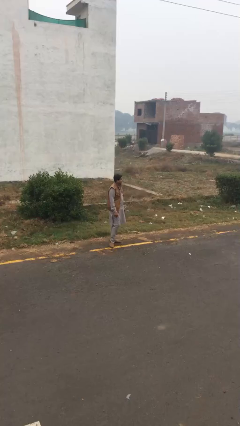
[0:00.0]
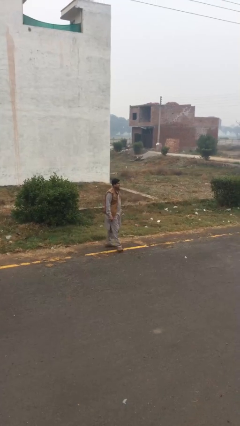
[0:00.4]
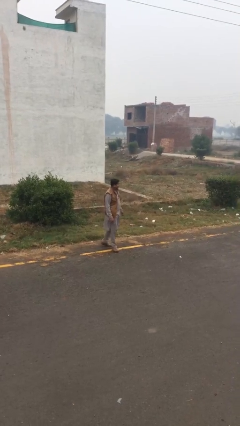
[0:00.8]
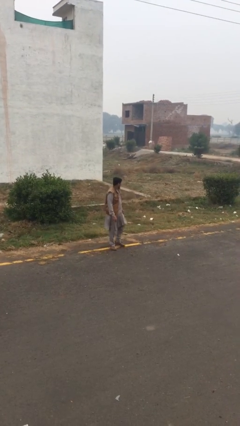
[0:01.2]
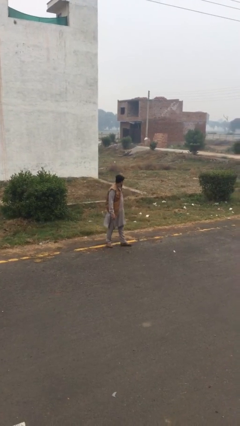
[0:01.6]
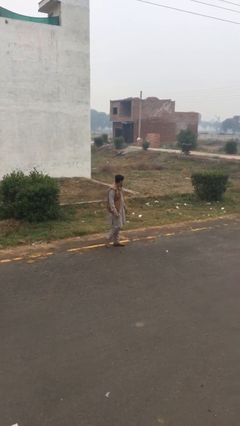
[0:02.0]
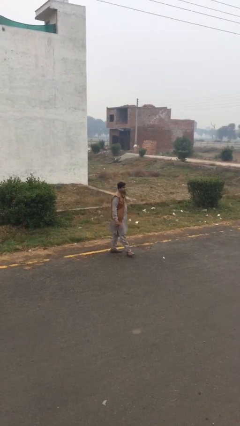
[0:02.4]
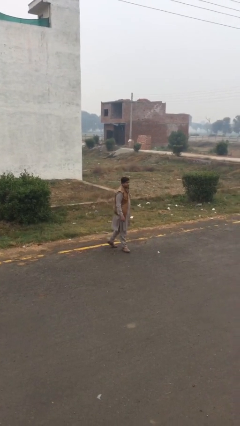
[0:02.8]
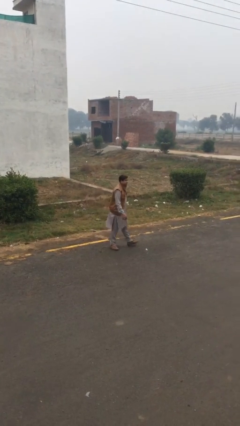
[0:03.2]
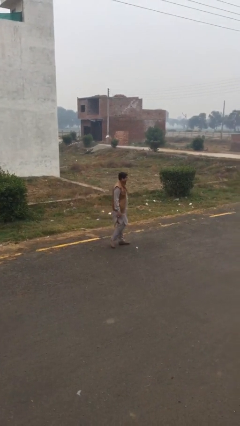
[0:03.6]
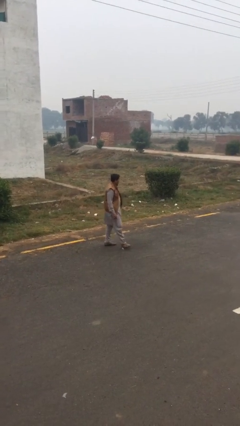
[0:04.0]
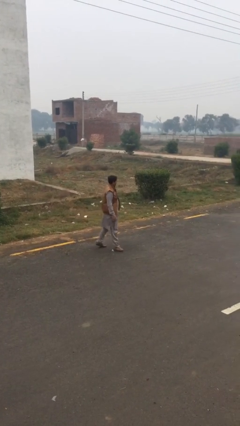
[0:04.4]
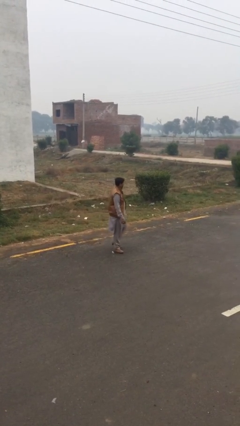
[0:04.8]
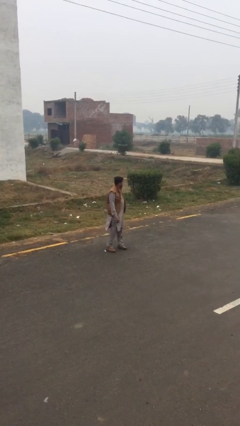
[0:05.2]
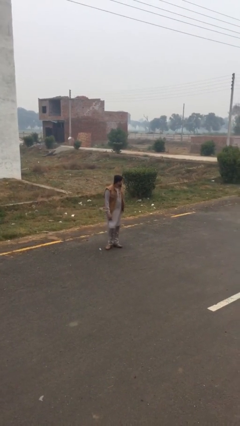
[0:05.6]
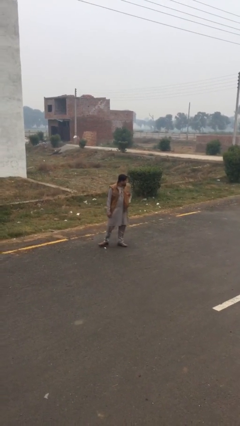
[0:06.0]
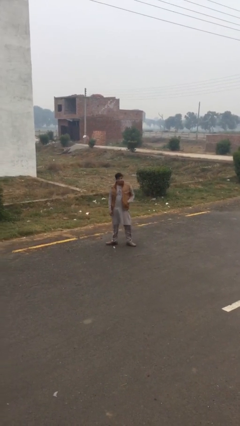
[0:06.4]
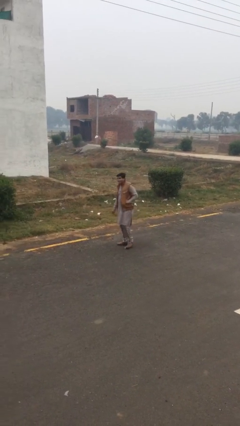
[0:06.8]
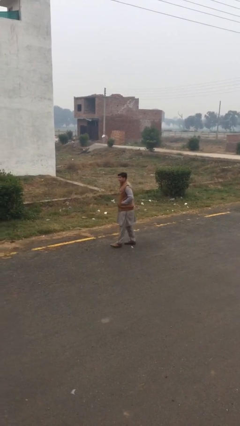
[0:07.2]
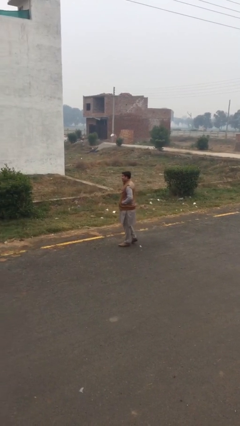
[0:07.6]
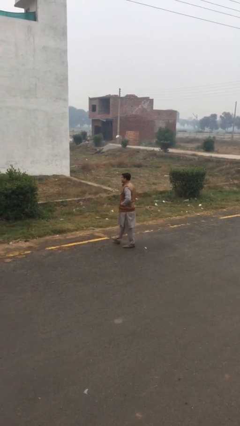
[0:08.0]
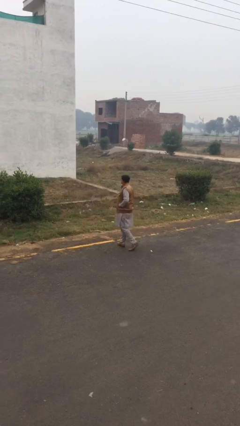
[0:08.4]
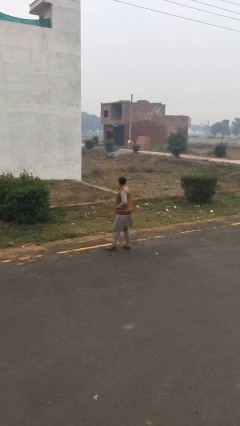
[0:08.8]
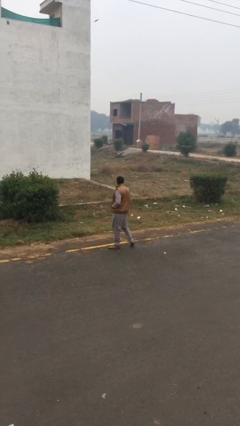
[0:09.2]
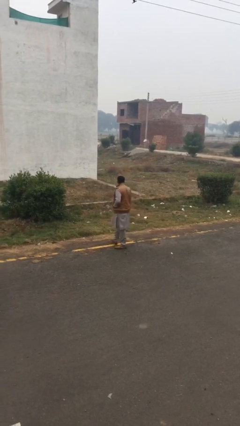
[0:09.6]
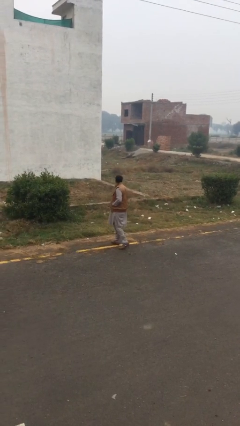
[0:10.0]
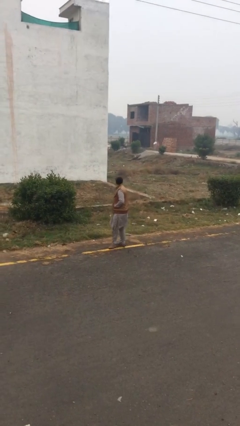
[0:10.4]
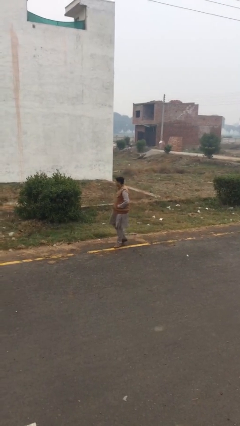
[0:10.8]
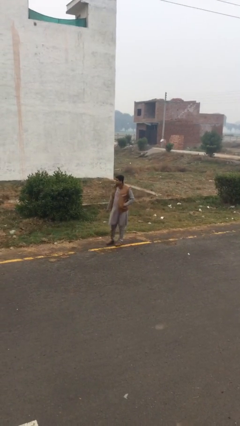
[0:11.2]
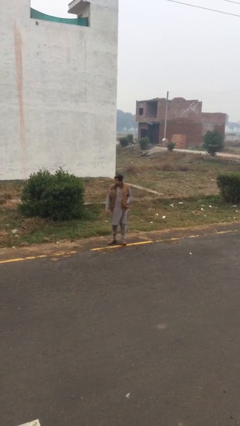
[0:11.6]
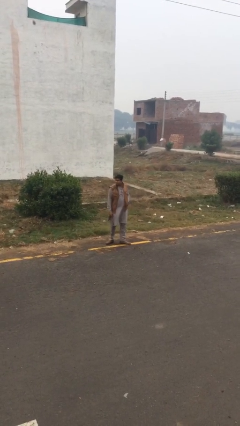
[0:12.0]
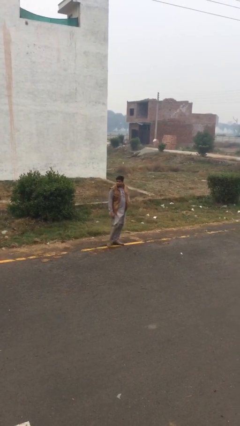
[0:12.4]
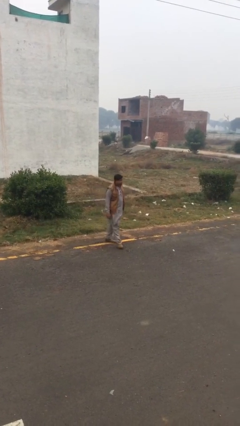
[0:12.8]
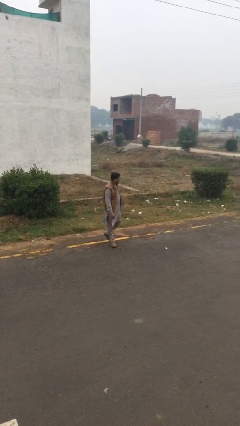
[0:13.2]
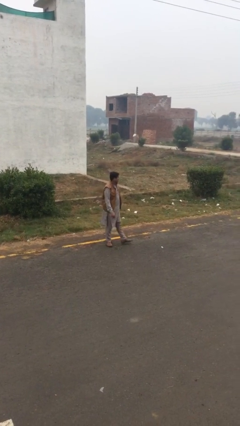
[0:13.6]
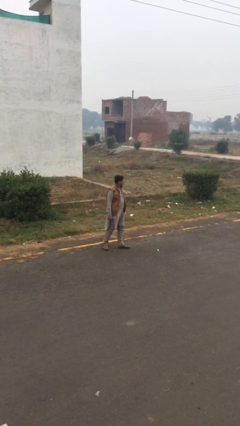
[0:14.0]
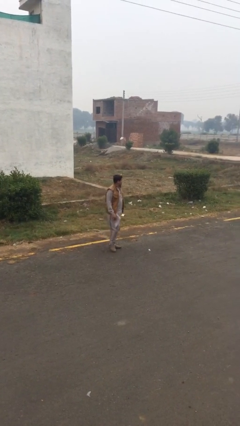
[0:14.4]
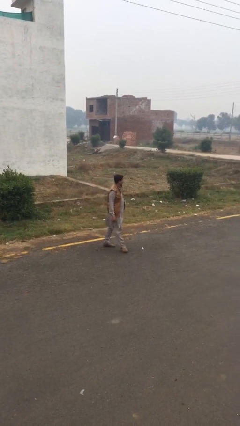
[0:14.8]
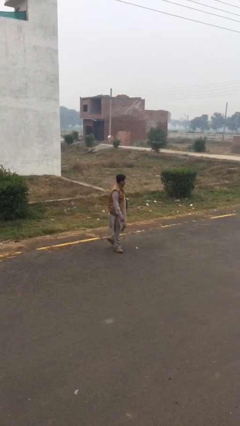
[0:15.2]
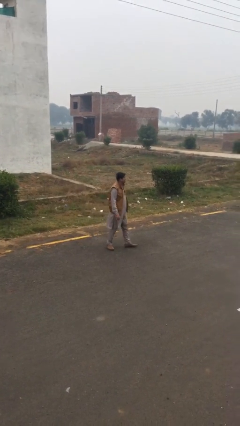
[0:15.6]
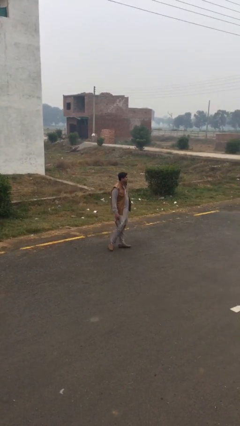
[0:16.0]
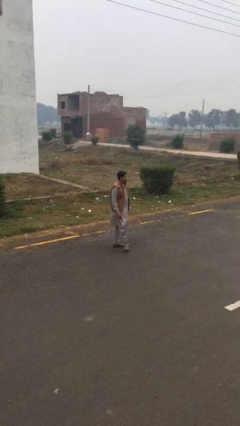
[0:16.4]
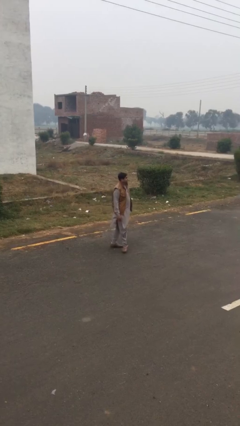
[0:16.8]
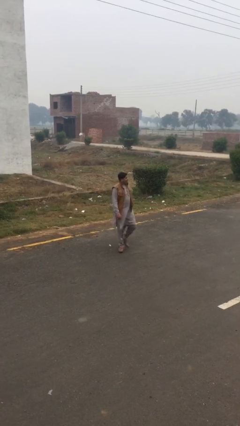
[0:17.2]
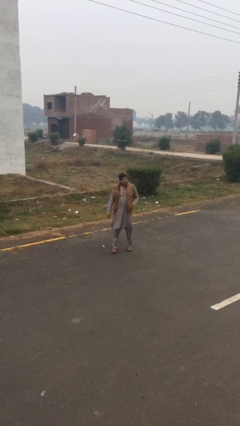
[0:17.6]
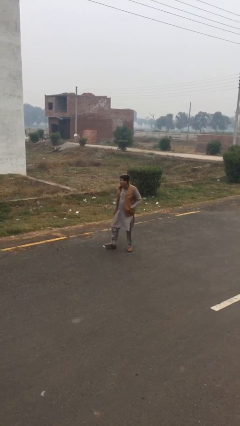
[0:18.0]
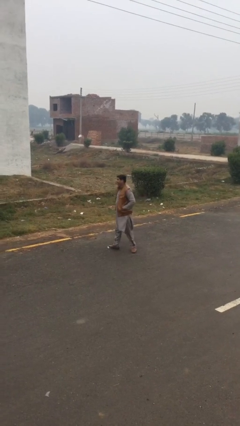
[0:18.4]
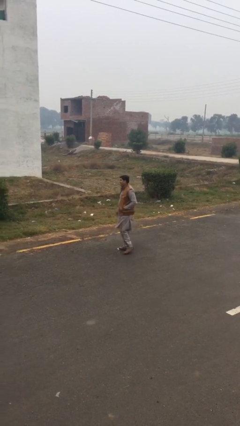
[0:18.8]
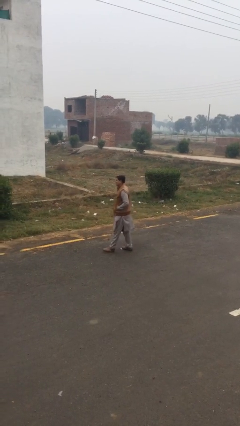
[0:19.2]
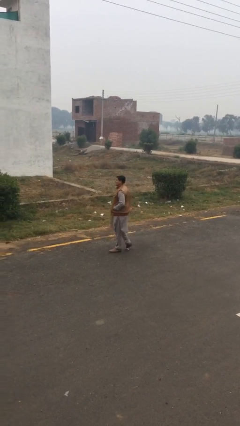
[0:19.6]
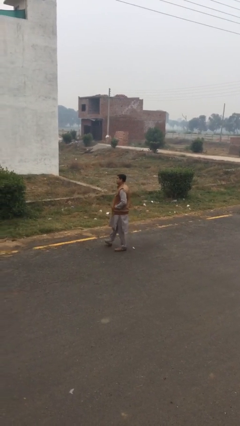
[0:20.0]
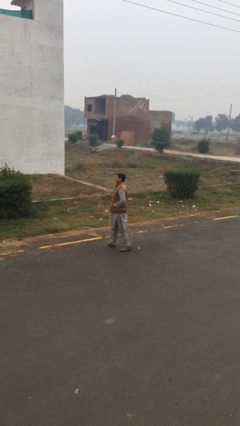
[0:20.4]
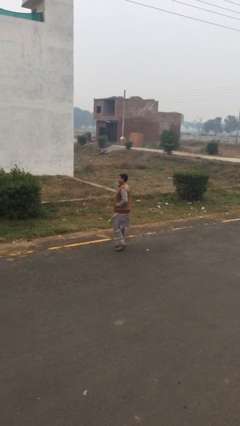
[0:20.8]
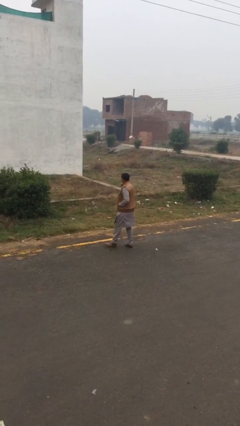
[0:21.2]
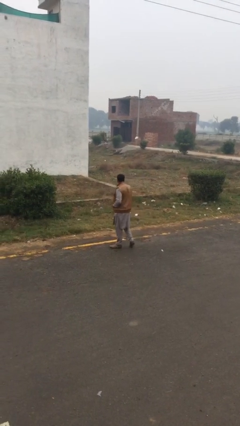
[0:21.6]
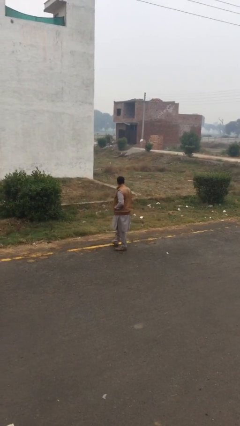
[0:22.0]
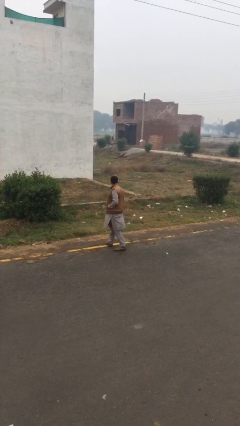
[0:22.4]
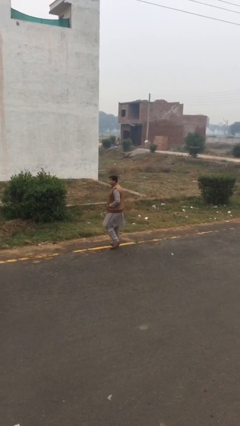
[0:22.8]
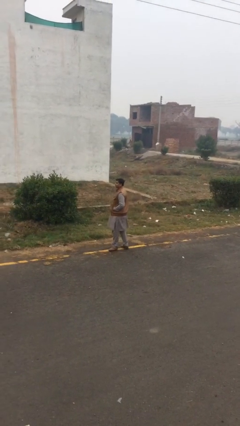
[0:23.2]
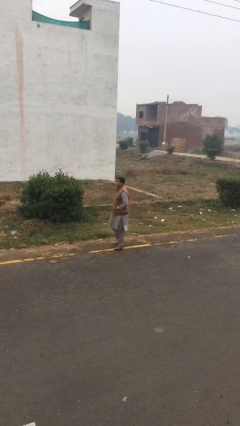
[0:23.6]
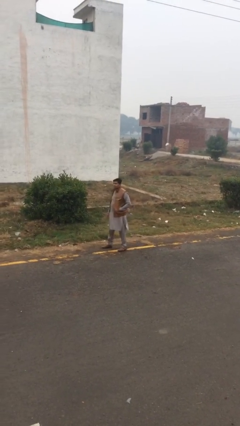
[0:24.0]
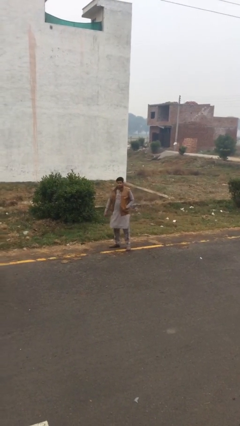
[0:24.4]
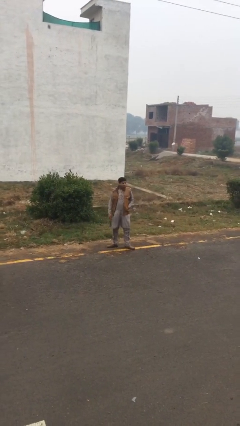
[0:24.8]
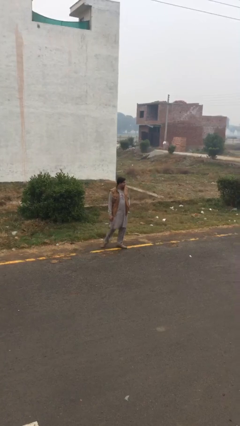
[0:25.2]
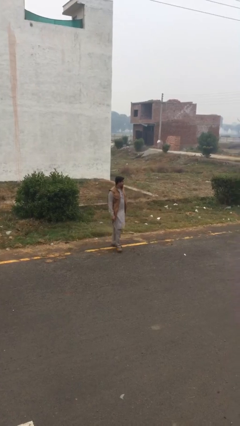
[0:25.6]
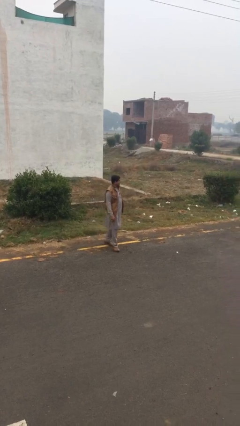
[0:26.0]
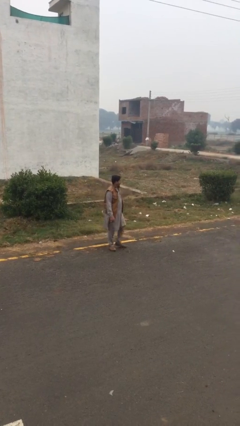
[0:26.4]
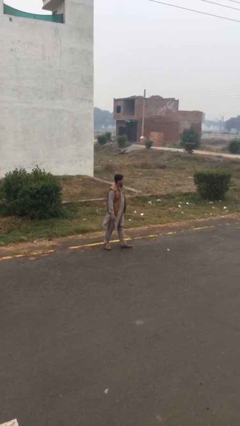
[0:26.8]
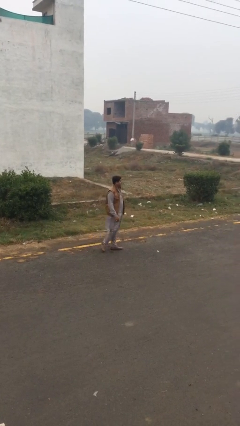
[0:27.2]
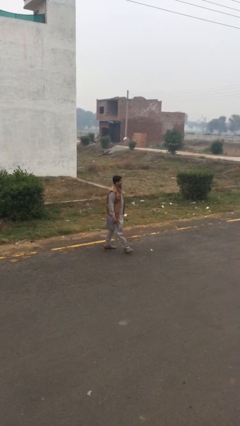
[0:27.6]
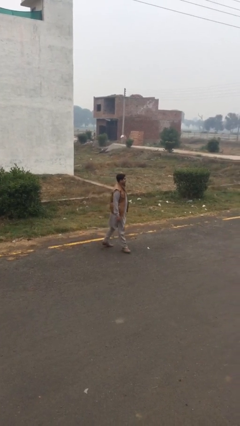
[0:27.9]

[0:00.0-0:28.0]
person walks

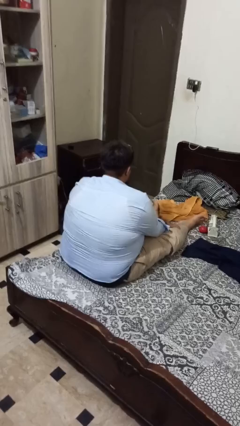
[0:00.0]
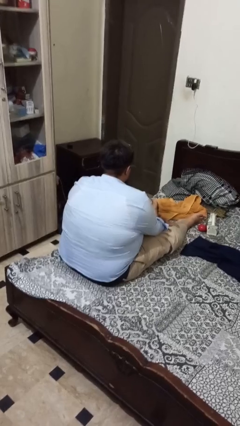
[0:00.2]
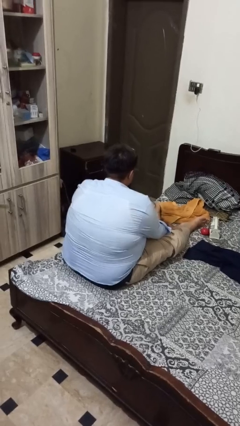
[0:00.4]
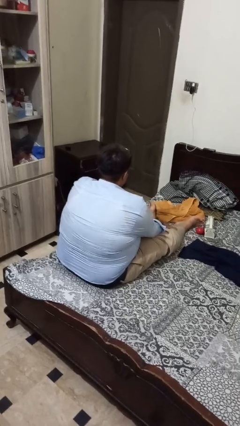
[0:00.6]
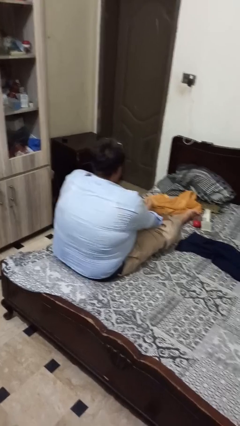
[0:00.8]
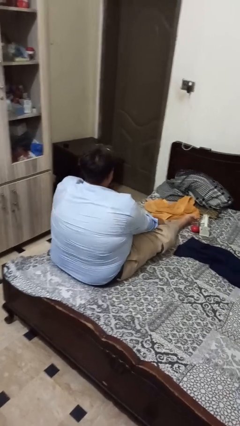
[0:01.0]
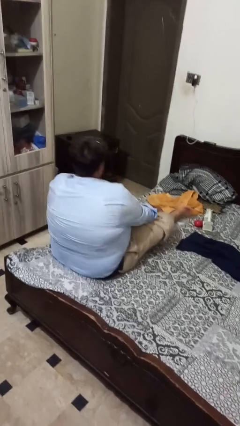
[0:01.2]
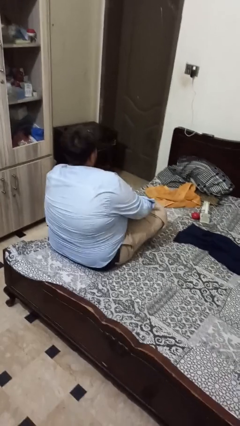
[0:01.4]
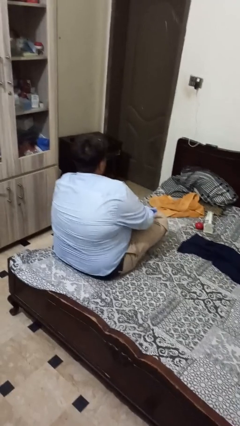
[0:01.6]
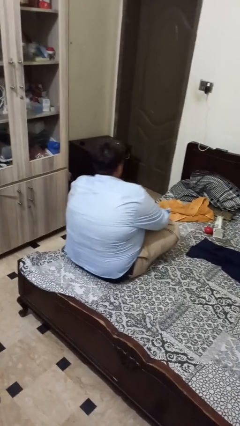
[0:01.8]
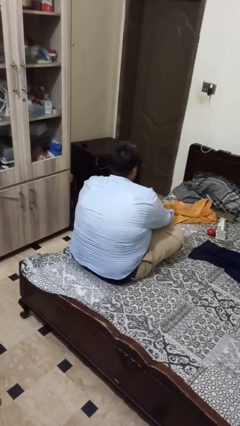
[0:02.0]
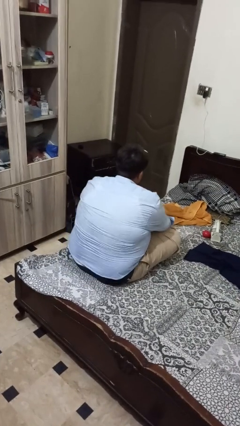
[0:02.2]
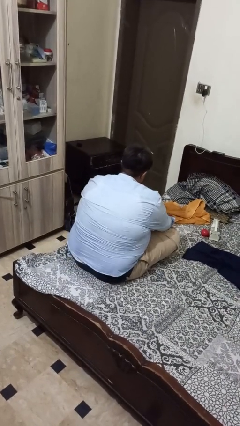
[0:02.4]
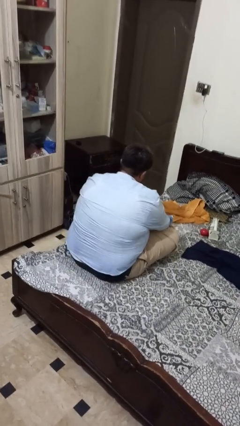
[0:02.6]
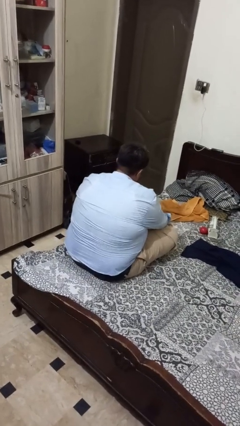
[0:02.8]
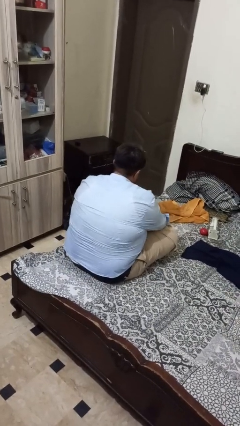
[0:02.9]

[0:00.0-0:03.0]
person crosses legs

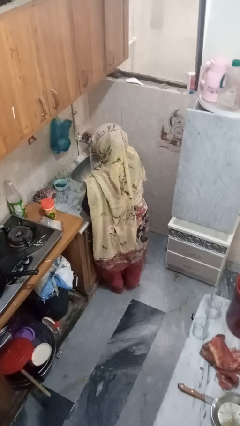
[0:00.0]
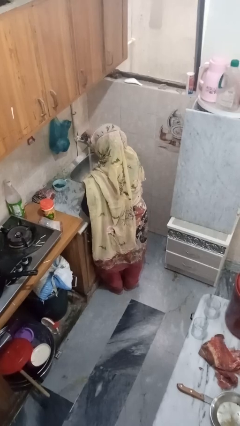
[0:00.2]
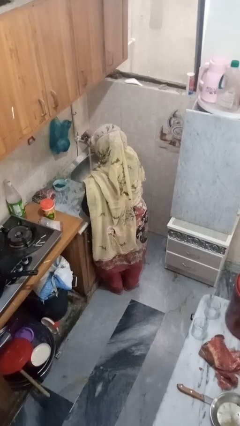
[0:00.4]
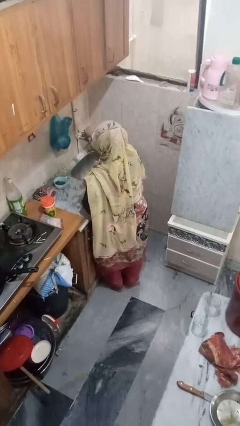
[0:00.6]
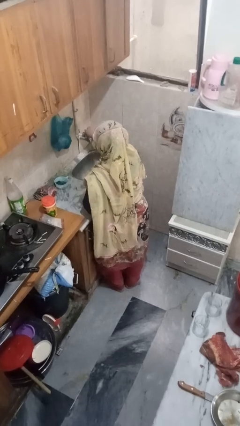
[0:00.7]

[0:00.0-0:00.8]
person turns off faucet

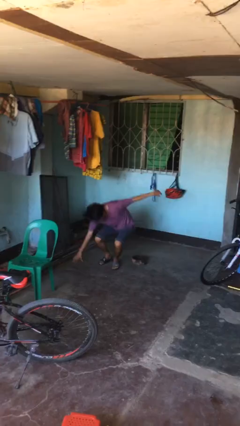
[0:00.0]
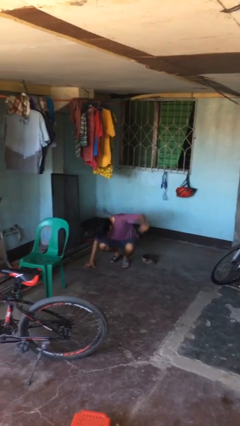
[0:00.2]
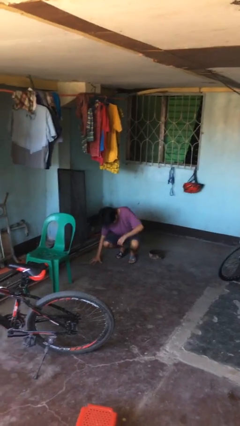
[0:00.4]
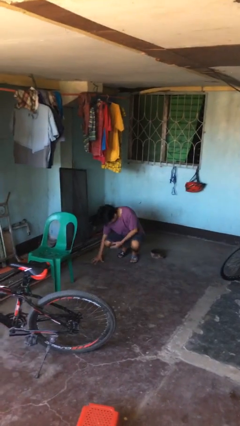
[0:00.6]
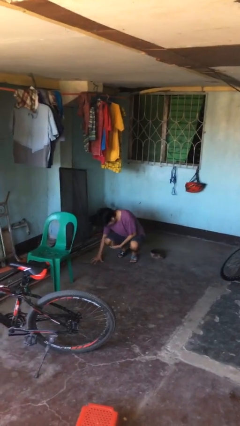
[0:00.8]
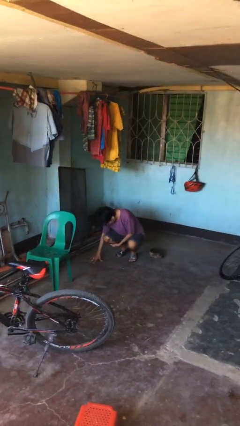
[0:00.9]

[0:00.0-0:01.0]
person lies down on floor
